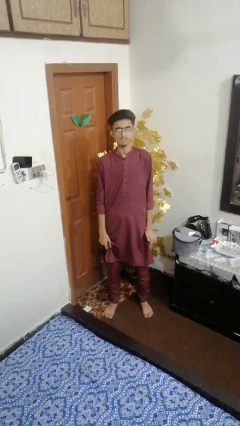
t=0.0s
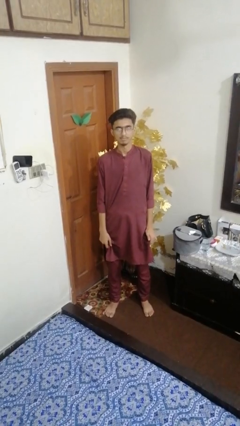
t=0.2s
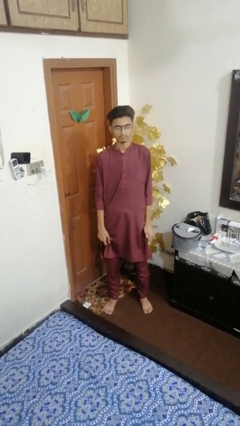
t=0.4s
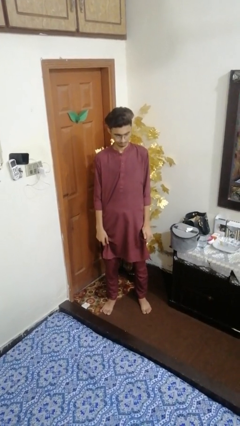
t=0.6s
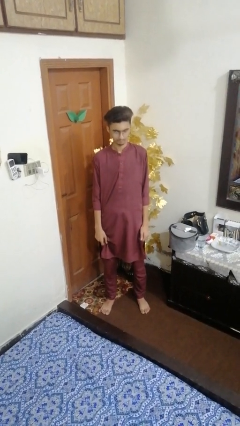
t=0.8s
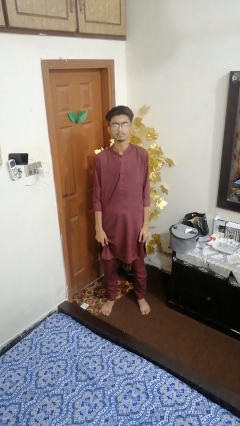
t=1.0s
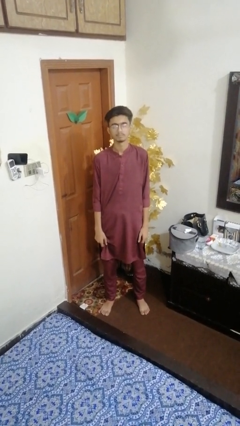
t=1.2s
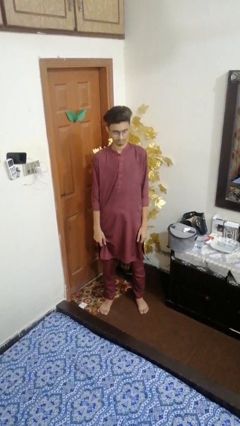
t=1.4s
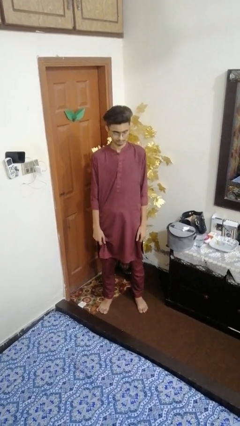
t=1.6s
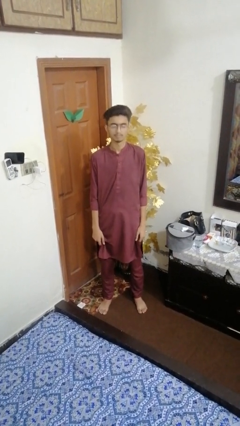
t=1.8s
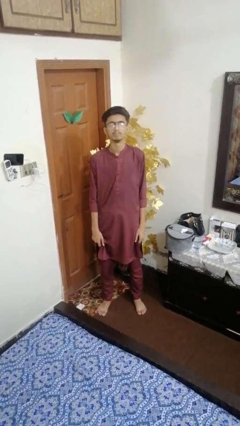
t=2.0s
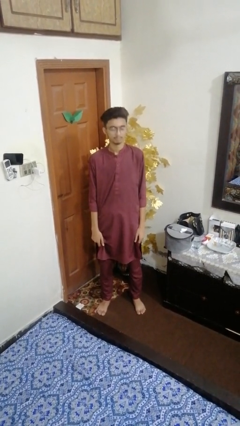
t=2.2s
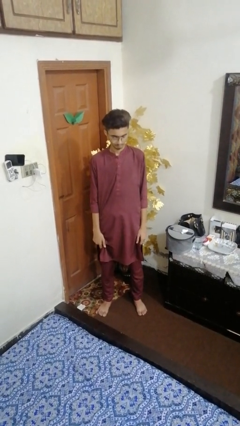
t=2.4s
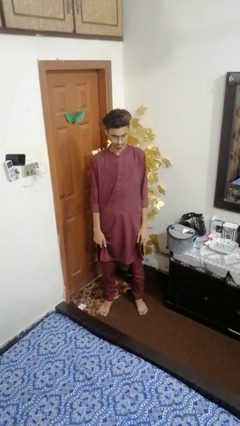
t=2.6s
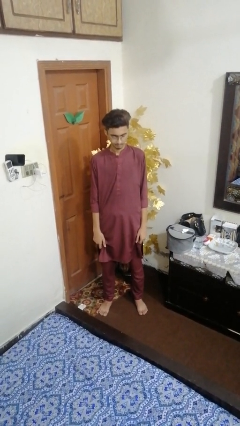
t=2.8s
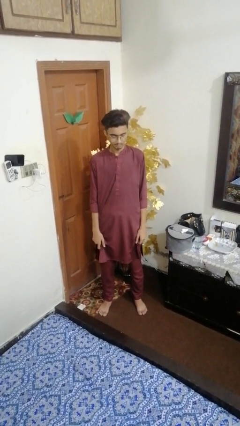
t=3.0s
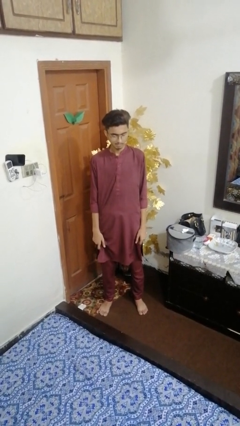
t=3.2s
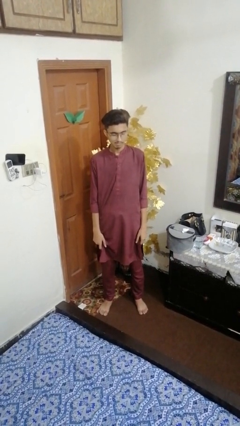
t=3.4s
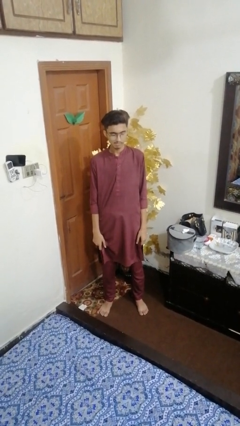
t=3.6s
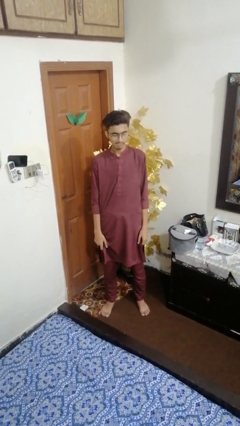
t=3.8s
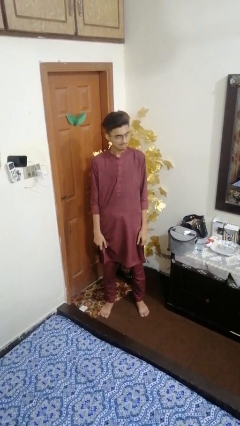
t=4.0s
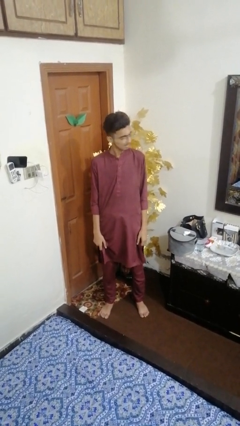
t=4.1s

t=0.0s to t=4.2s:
person nods head

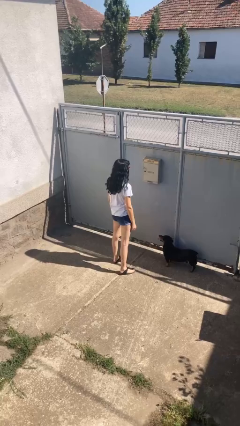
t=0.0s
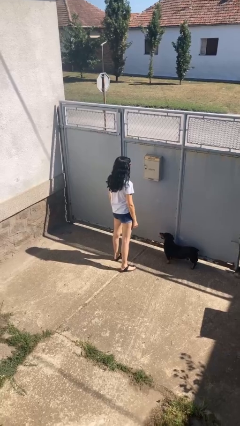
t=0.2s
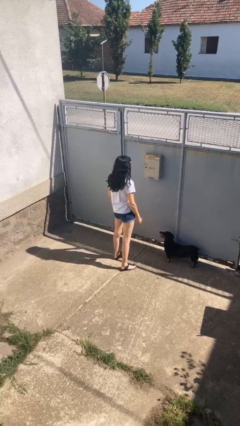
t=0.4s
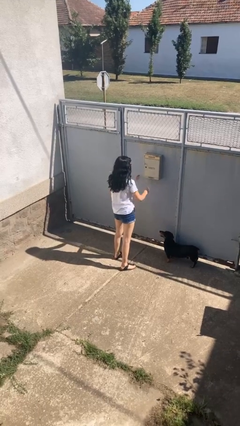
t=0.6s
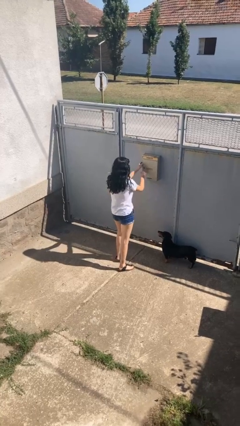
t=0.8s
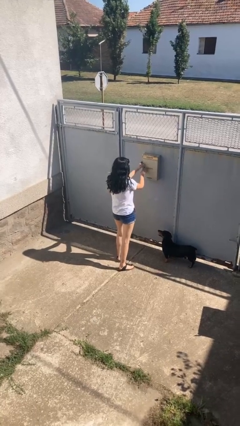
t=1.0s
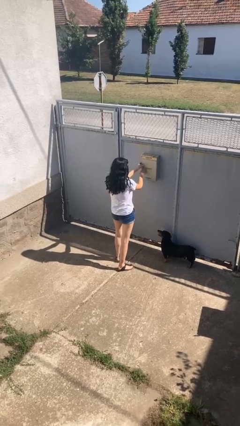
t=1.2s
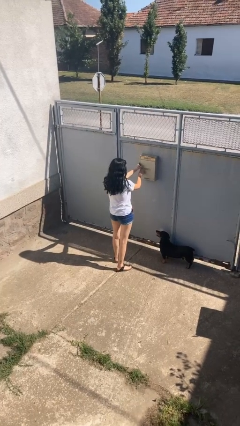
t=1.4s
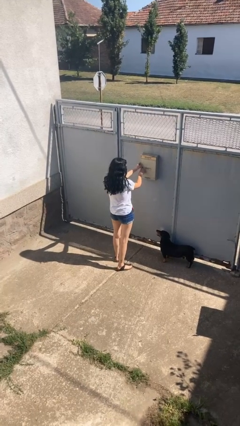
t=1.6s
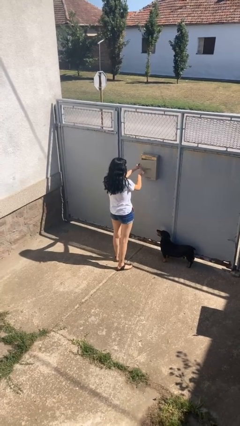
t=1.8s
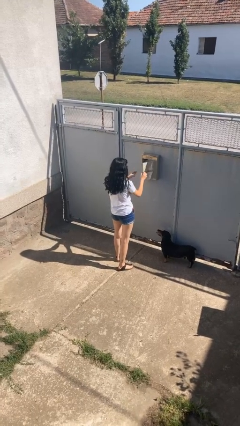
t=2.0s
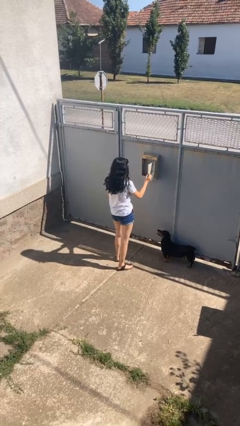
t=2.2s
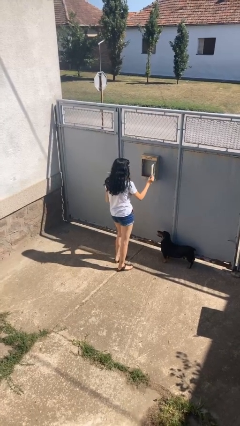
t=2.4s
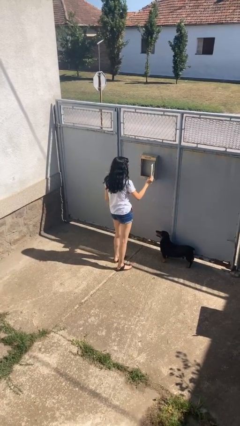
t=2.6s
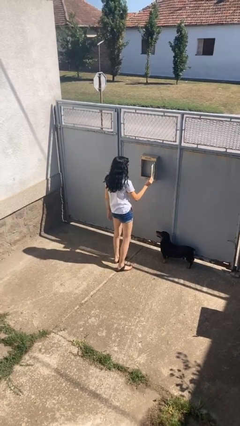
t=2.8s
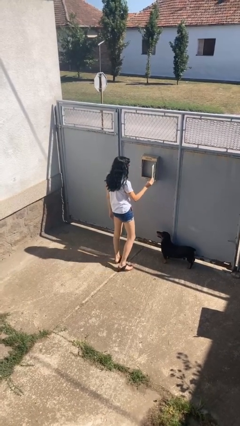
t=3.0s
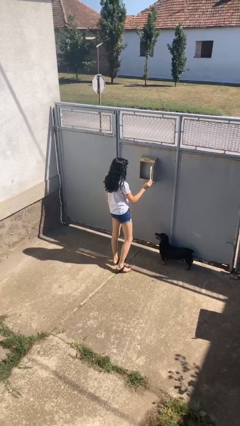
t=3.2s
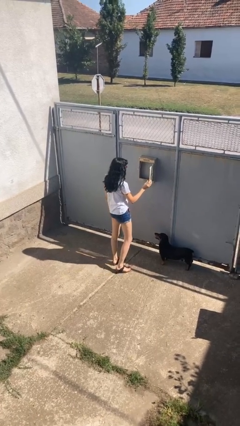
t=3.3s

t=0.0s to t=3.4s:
person opens mailbox

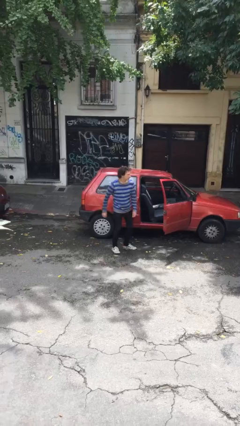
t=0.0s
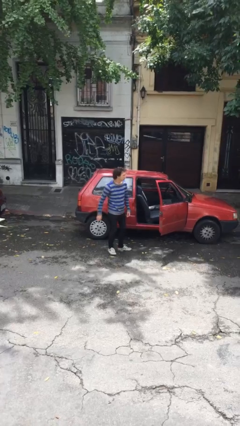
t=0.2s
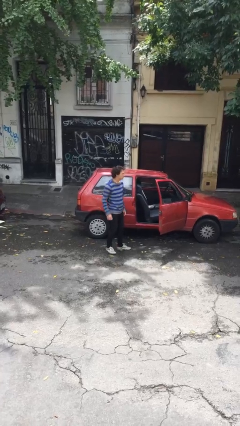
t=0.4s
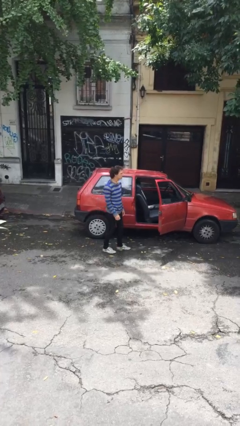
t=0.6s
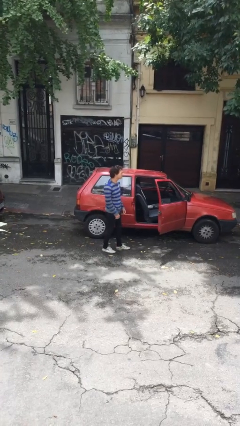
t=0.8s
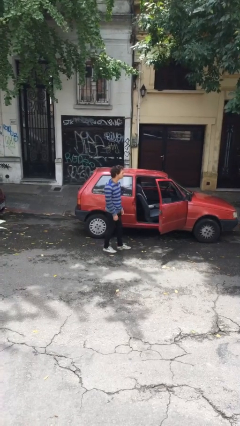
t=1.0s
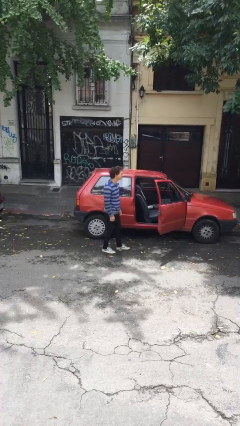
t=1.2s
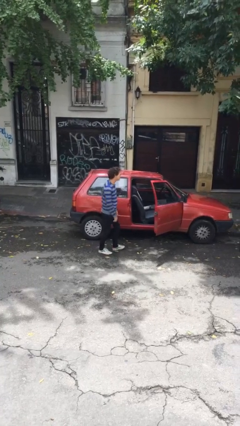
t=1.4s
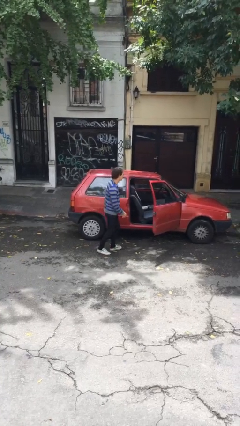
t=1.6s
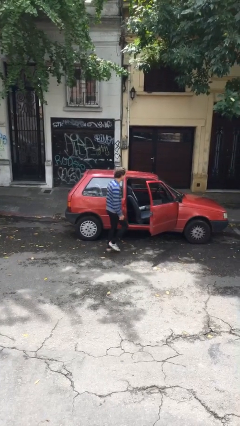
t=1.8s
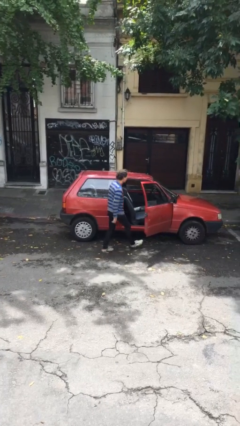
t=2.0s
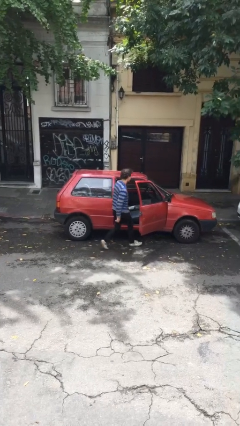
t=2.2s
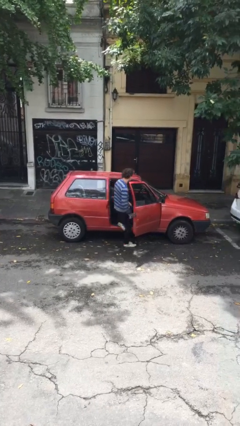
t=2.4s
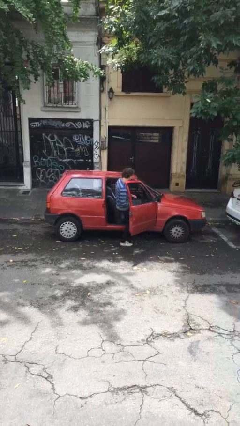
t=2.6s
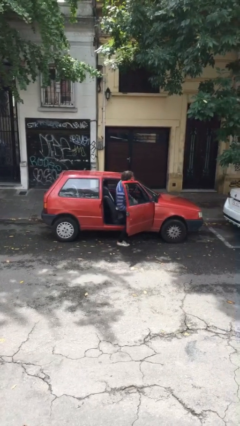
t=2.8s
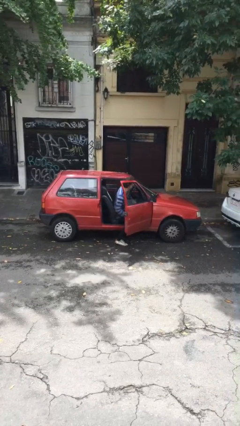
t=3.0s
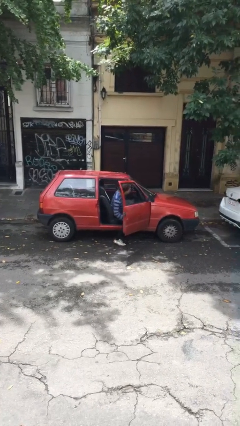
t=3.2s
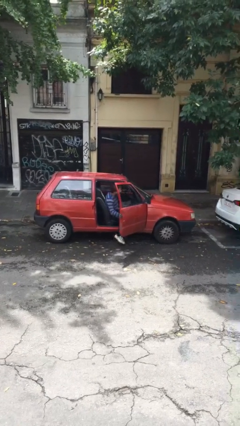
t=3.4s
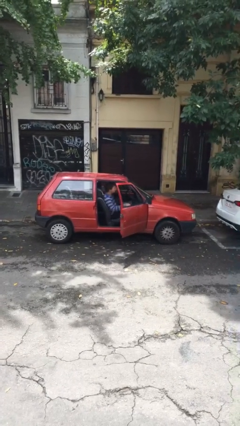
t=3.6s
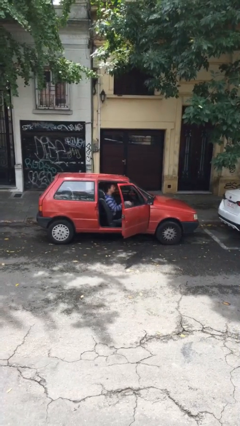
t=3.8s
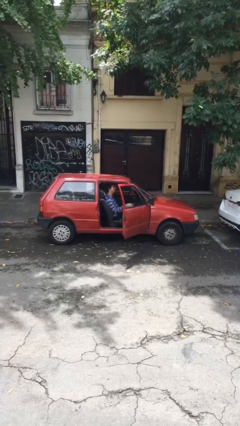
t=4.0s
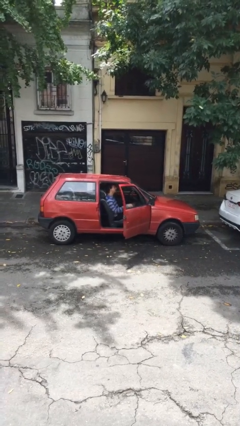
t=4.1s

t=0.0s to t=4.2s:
person enters car

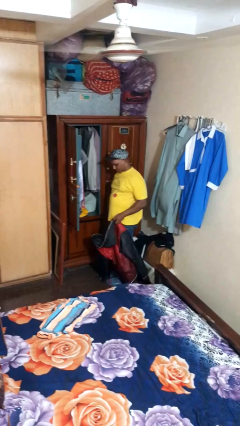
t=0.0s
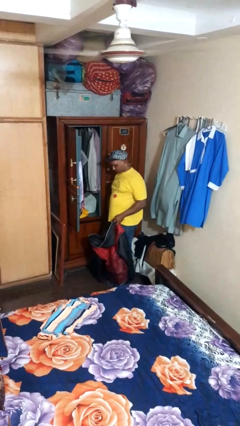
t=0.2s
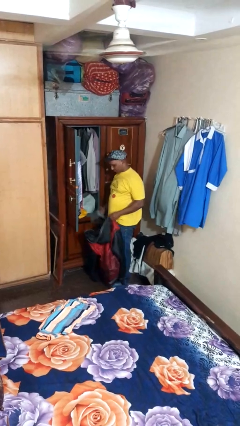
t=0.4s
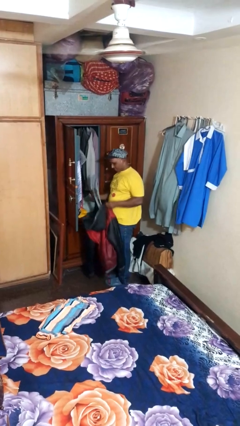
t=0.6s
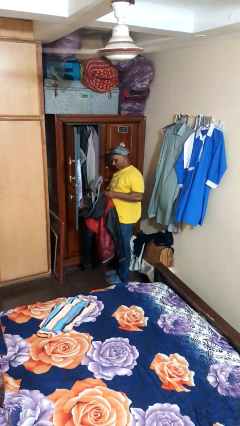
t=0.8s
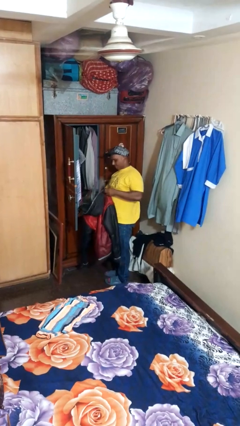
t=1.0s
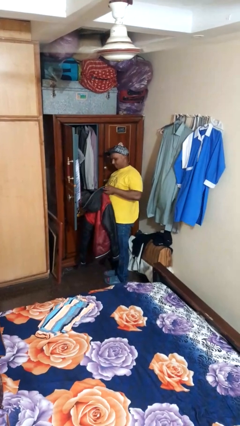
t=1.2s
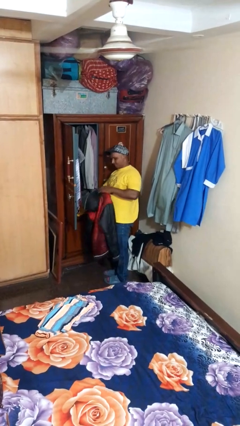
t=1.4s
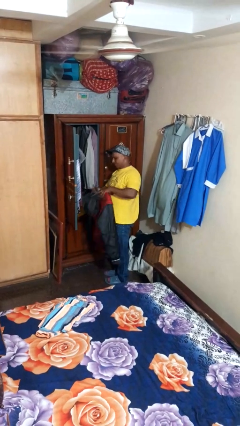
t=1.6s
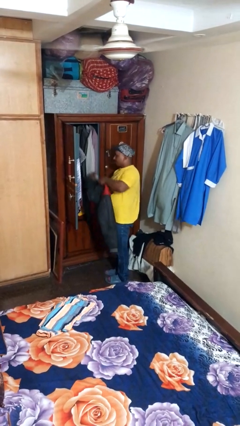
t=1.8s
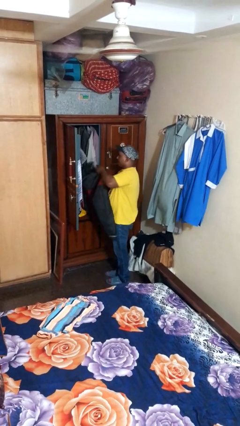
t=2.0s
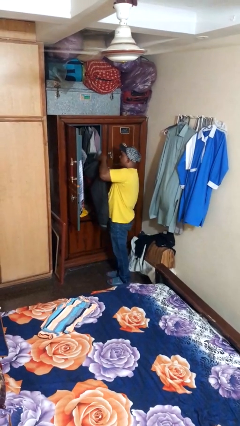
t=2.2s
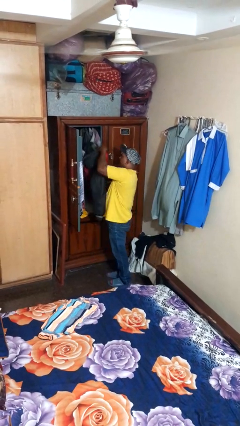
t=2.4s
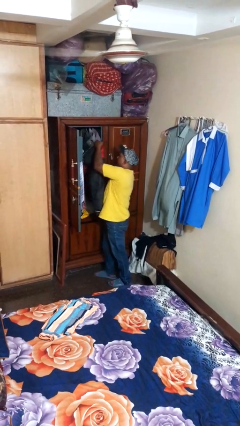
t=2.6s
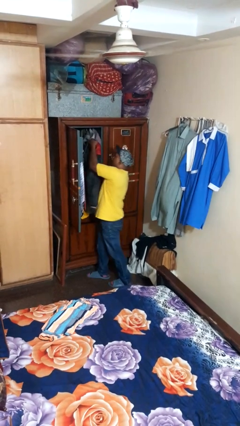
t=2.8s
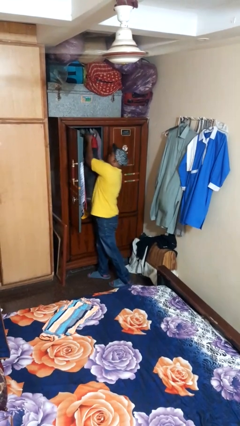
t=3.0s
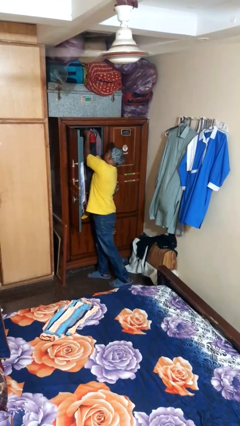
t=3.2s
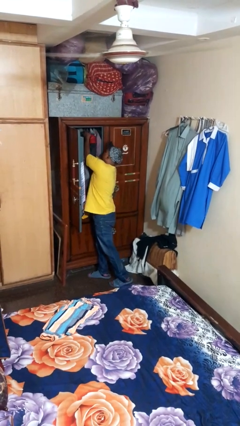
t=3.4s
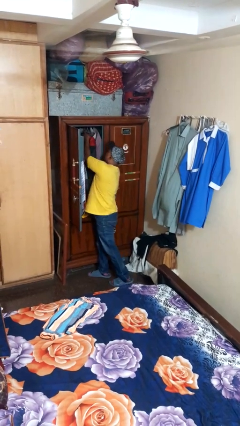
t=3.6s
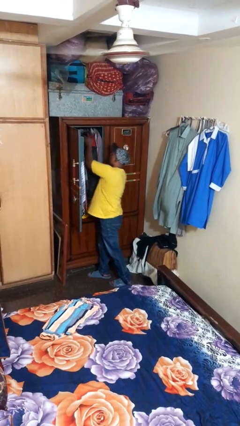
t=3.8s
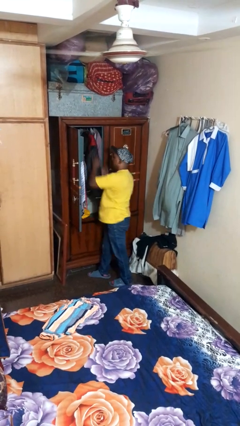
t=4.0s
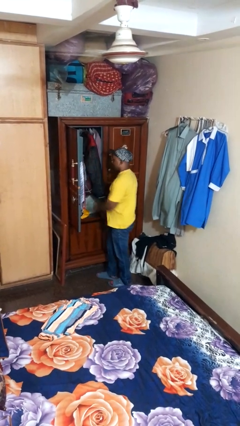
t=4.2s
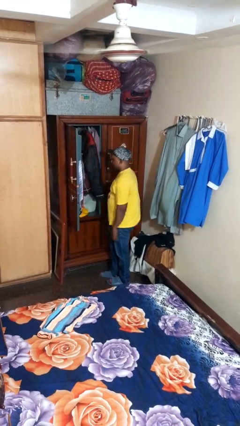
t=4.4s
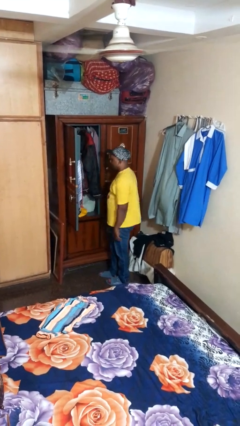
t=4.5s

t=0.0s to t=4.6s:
person puts clothes into closet

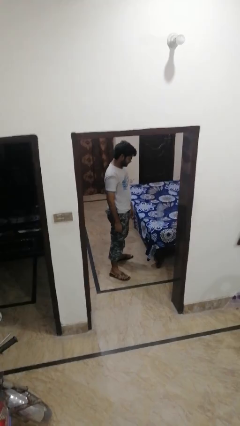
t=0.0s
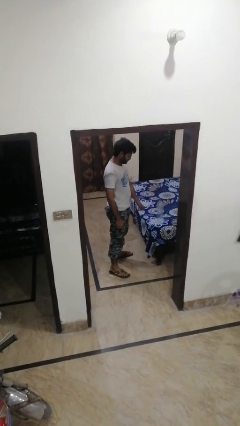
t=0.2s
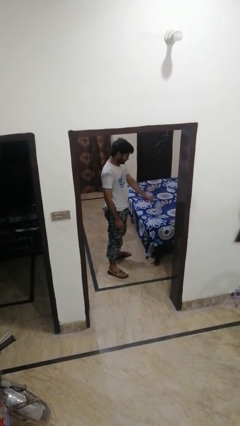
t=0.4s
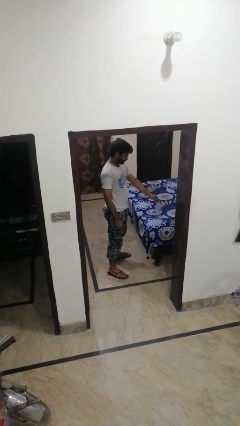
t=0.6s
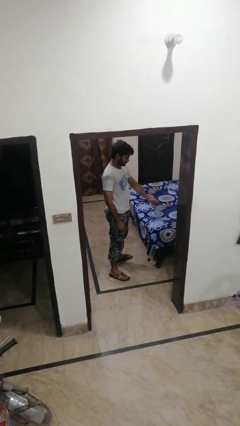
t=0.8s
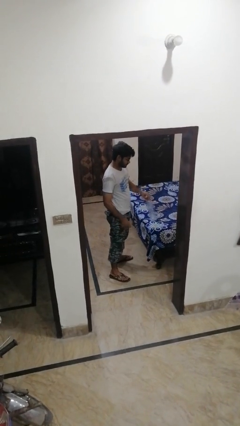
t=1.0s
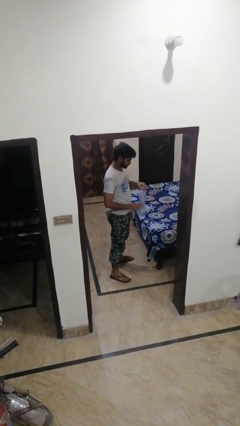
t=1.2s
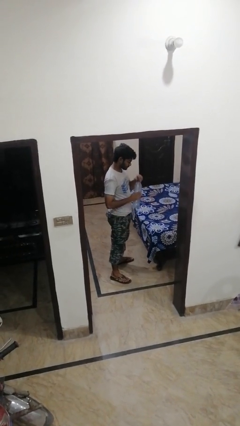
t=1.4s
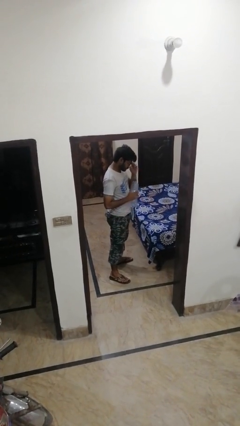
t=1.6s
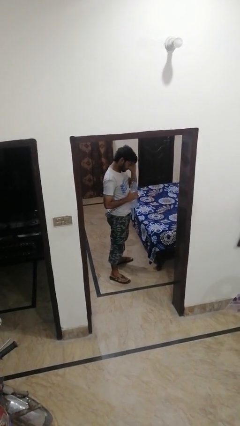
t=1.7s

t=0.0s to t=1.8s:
person picks up object from bed
